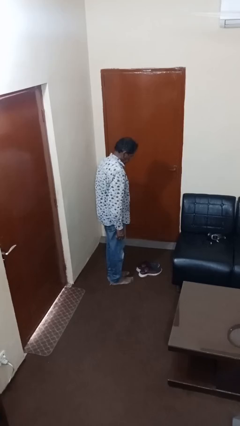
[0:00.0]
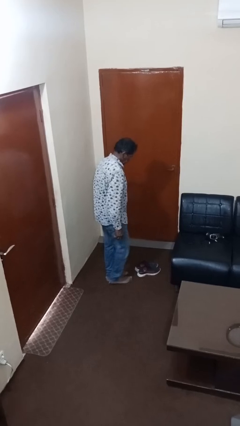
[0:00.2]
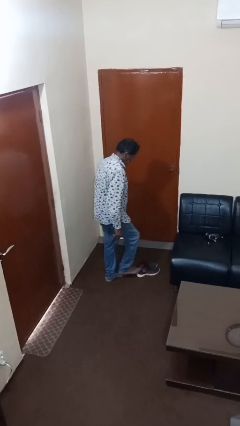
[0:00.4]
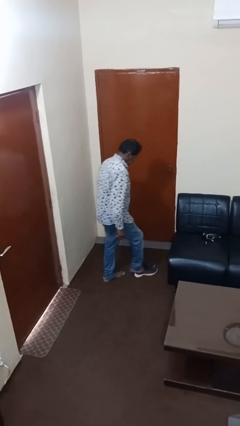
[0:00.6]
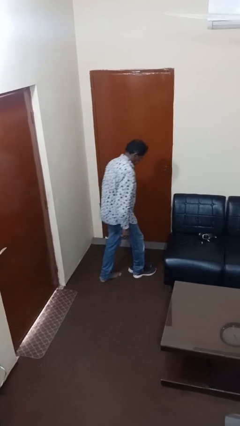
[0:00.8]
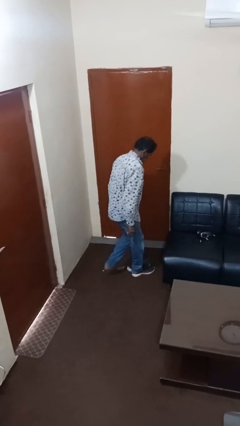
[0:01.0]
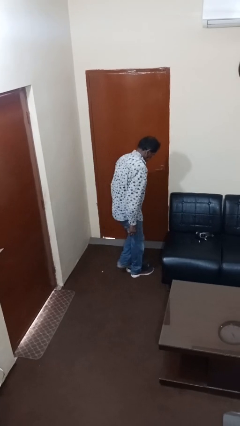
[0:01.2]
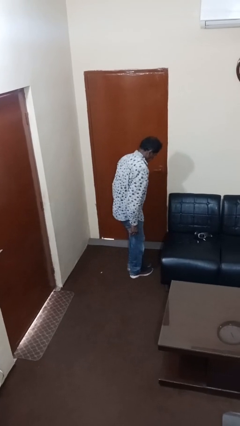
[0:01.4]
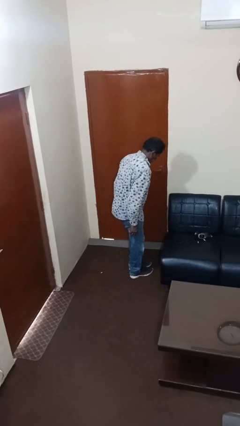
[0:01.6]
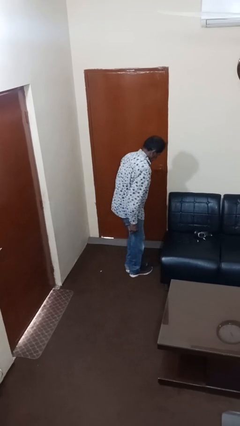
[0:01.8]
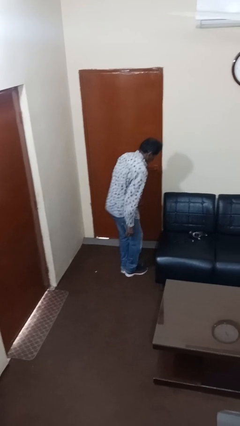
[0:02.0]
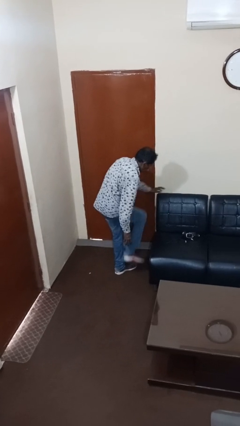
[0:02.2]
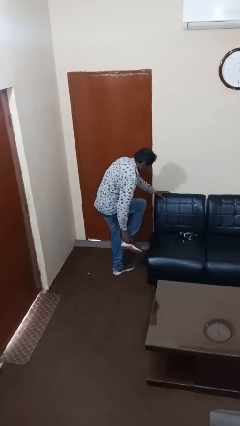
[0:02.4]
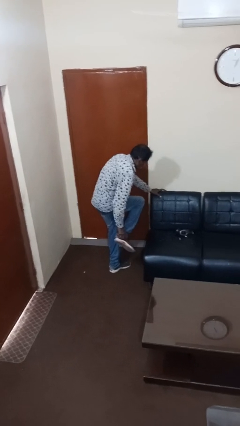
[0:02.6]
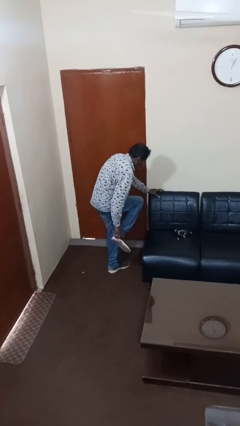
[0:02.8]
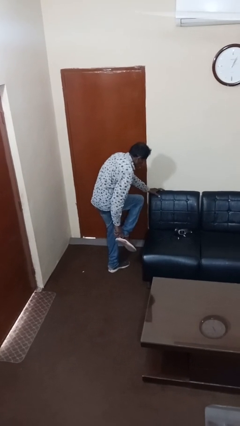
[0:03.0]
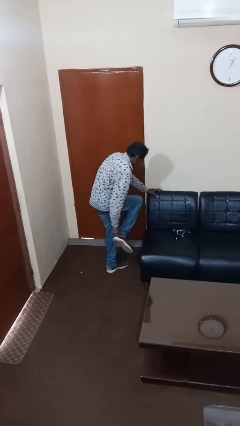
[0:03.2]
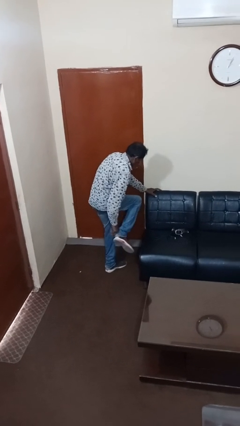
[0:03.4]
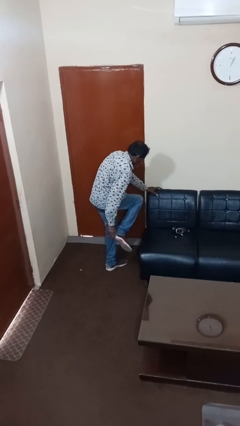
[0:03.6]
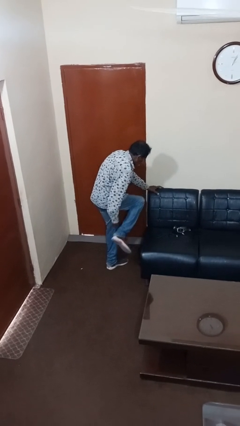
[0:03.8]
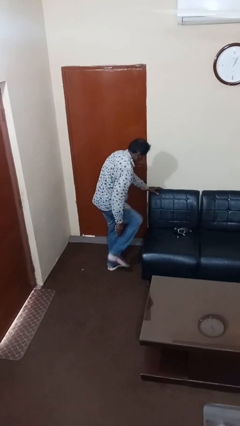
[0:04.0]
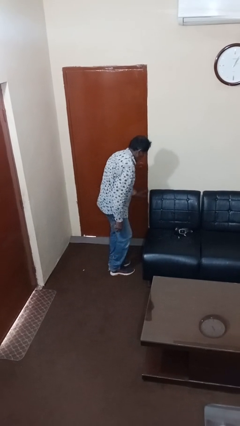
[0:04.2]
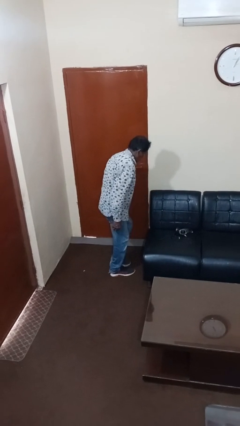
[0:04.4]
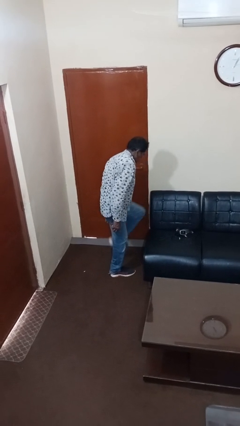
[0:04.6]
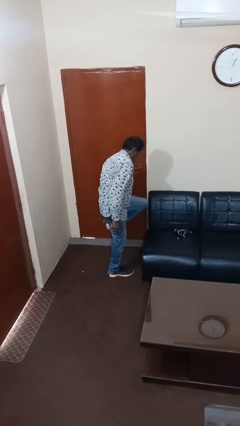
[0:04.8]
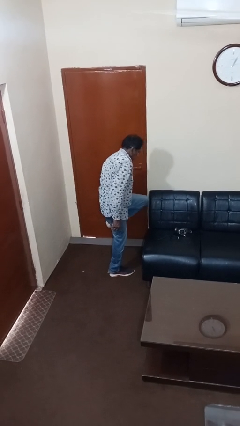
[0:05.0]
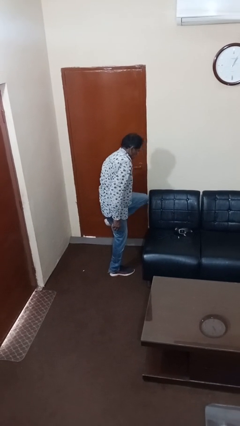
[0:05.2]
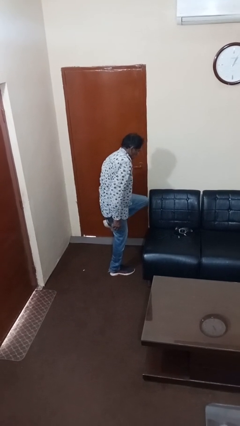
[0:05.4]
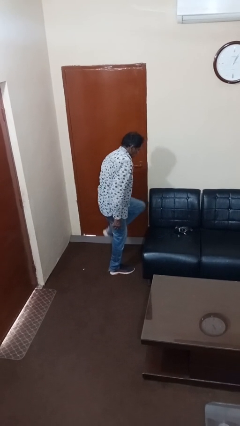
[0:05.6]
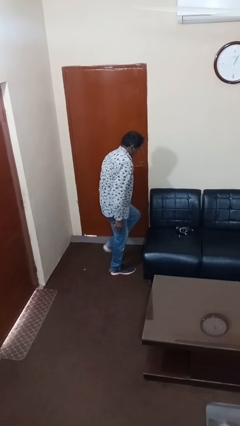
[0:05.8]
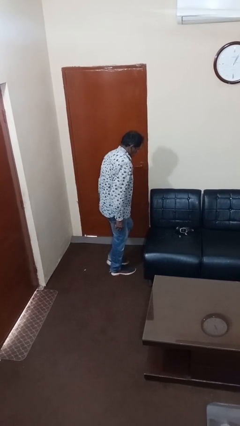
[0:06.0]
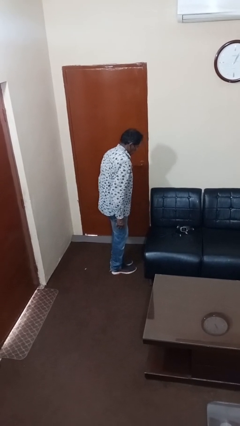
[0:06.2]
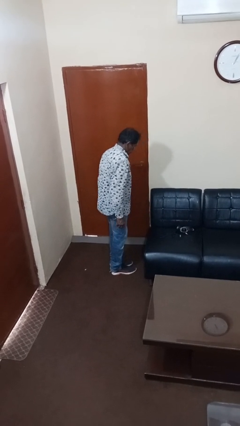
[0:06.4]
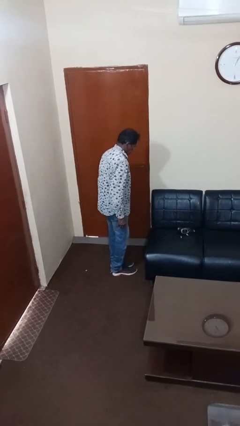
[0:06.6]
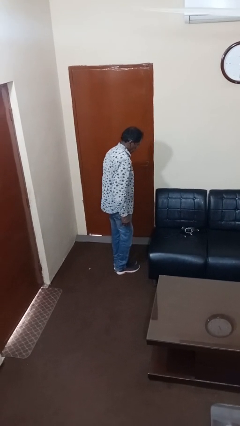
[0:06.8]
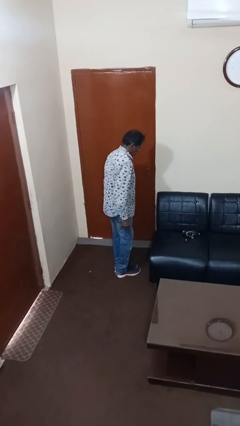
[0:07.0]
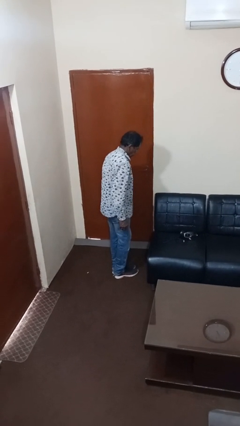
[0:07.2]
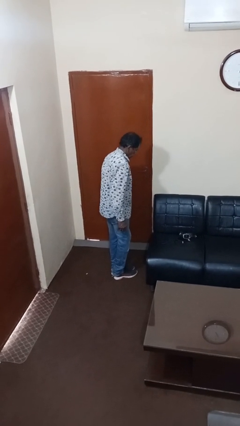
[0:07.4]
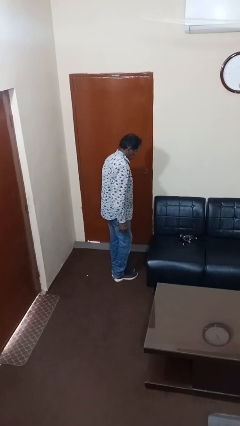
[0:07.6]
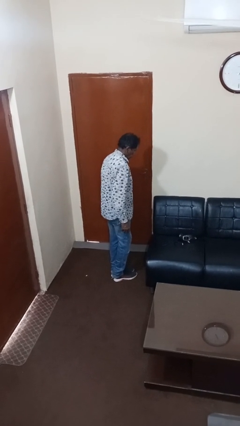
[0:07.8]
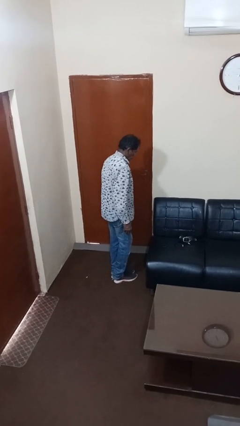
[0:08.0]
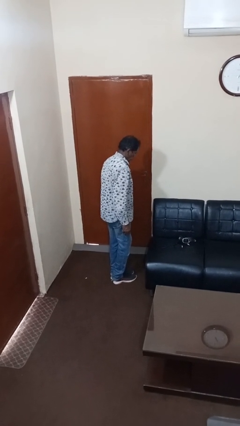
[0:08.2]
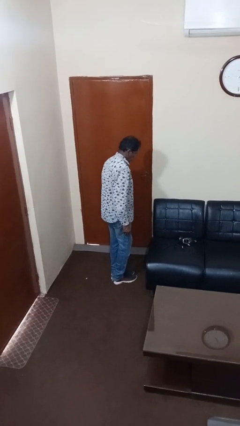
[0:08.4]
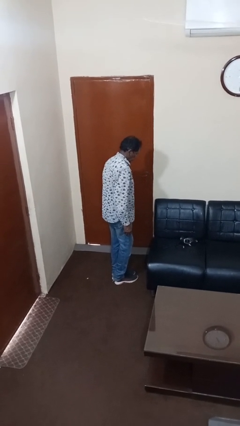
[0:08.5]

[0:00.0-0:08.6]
person puts on shoes

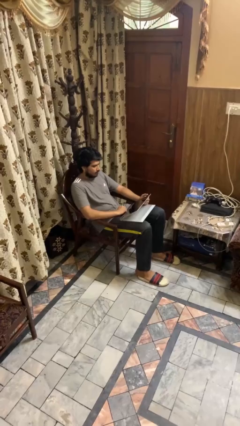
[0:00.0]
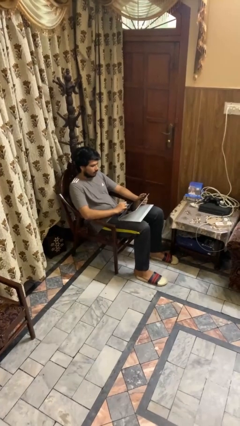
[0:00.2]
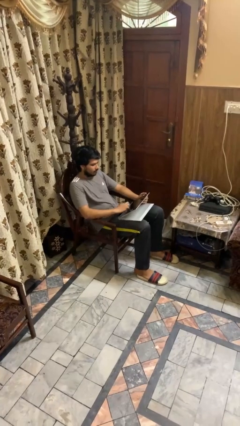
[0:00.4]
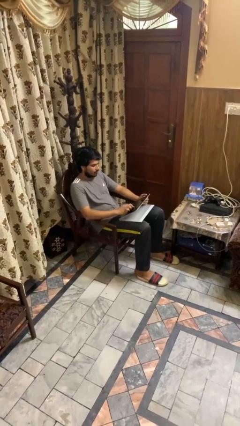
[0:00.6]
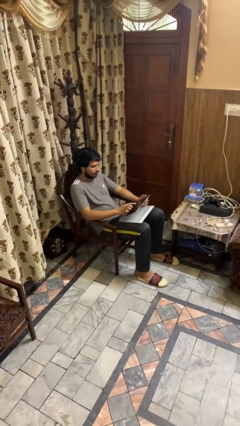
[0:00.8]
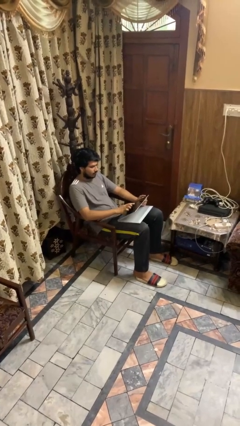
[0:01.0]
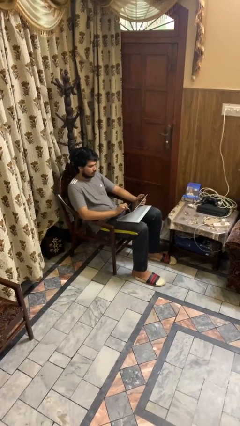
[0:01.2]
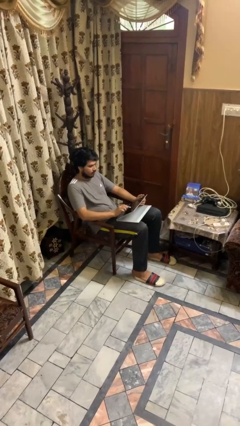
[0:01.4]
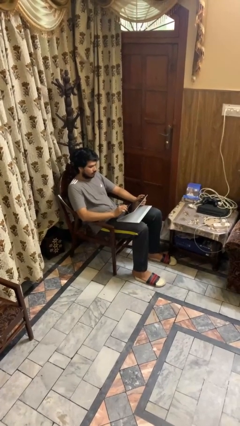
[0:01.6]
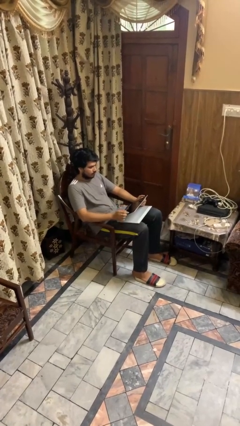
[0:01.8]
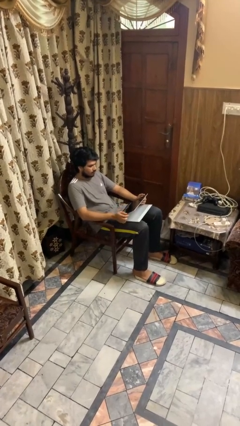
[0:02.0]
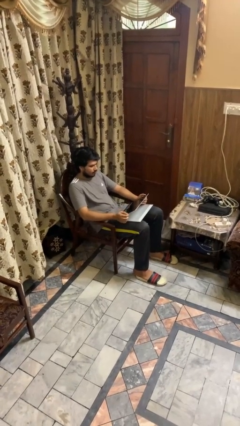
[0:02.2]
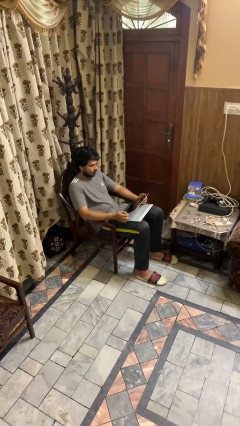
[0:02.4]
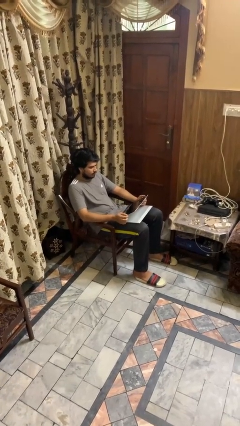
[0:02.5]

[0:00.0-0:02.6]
person interacts with tablet

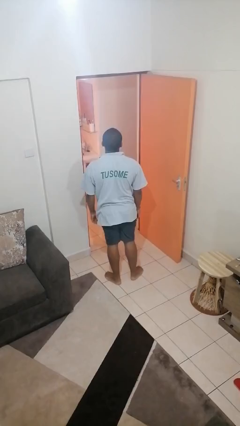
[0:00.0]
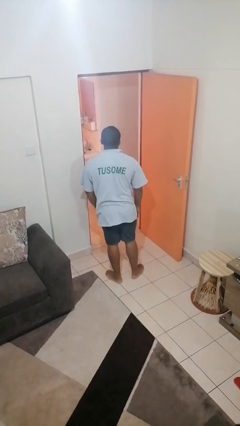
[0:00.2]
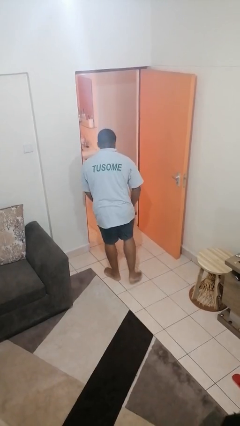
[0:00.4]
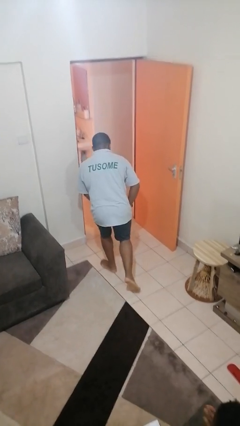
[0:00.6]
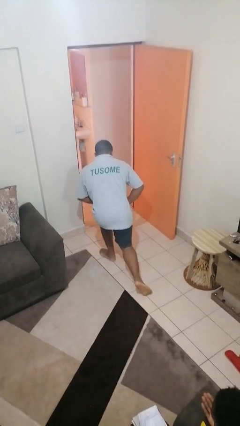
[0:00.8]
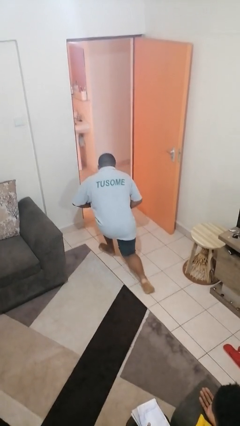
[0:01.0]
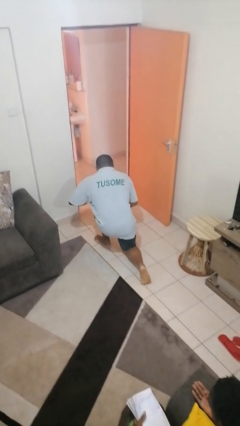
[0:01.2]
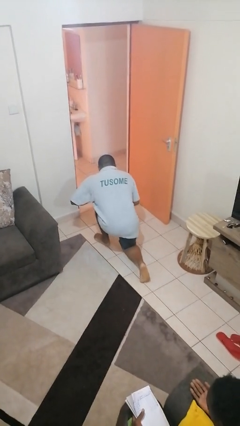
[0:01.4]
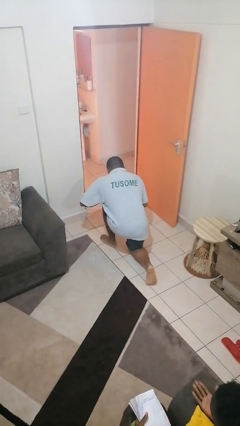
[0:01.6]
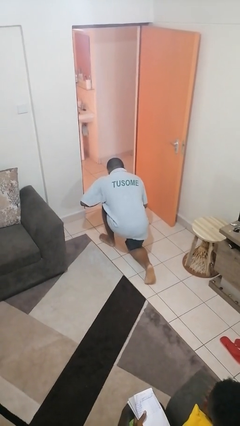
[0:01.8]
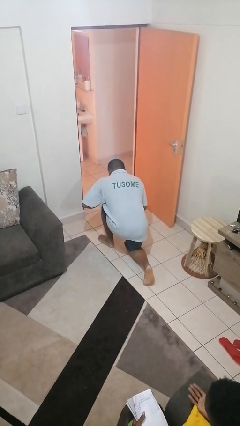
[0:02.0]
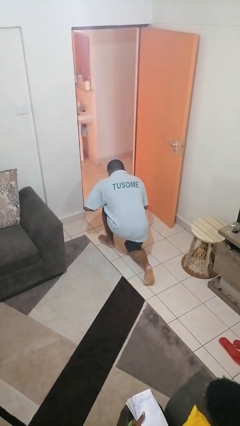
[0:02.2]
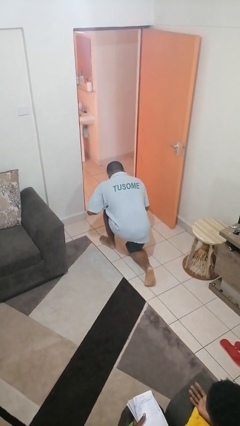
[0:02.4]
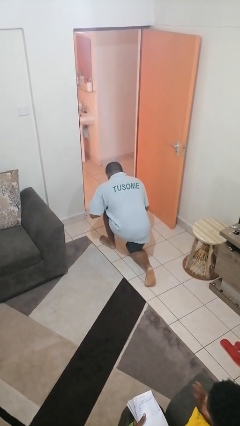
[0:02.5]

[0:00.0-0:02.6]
person kneels

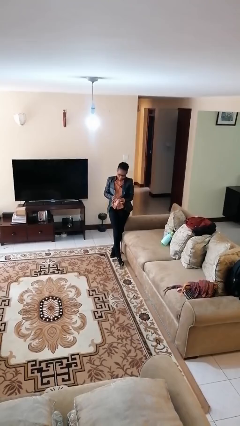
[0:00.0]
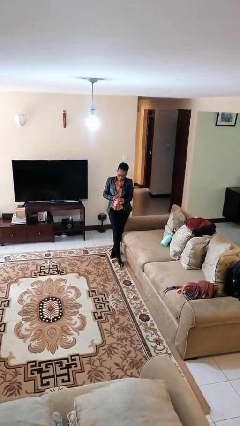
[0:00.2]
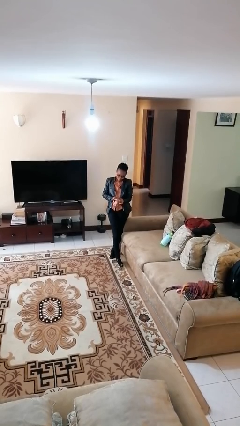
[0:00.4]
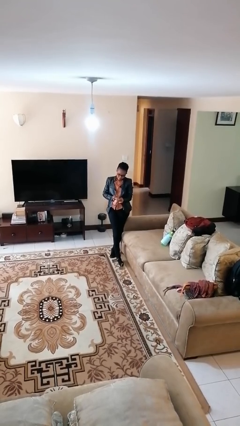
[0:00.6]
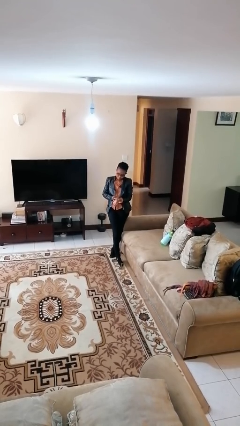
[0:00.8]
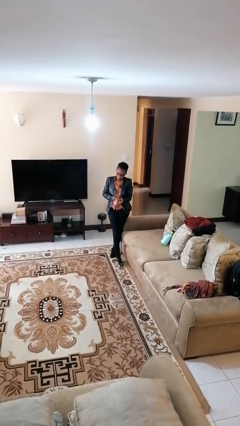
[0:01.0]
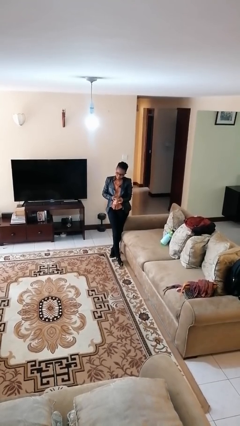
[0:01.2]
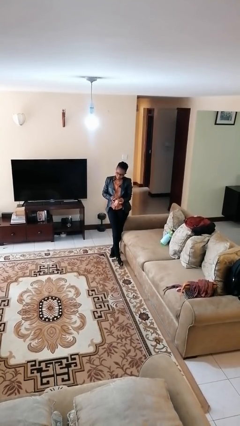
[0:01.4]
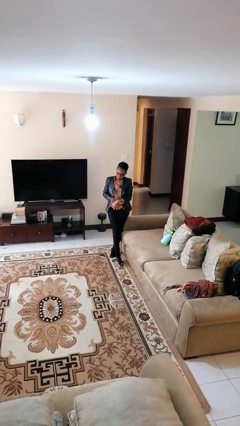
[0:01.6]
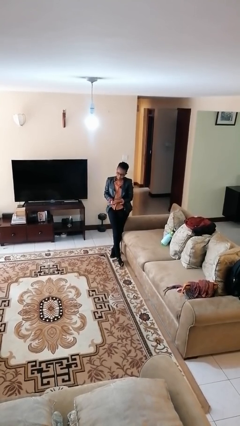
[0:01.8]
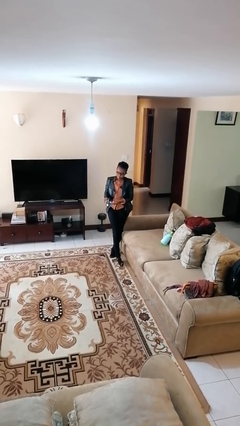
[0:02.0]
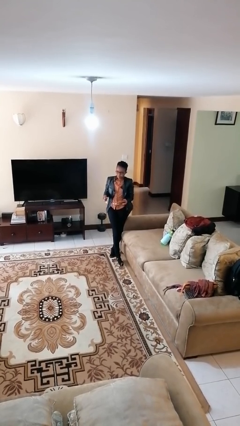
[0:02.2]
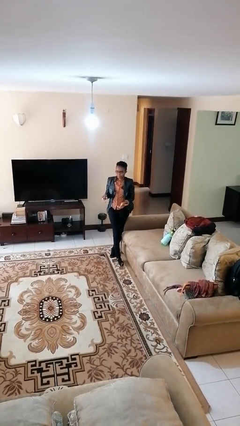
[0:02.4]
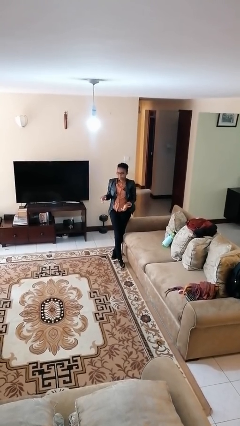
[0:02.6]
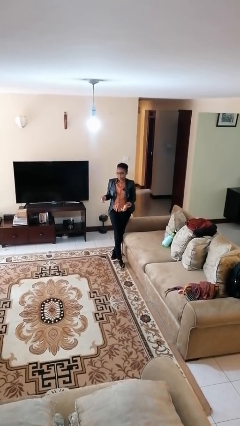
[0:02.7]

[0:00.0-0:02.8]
person takes off wristwatch

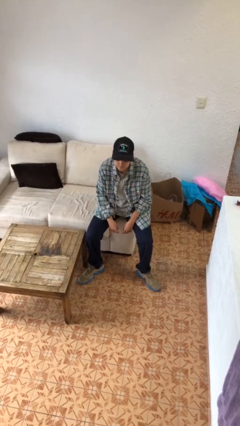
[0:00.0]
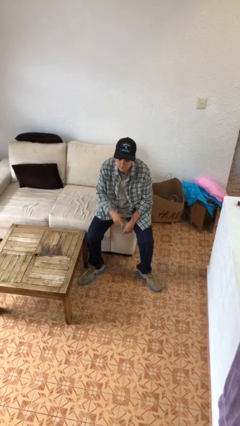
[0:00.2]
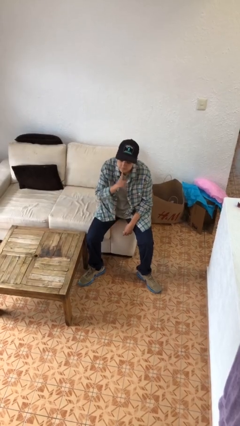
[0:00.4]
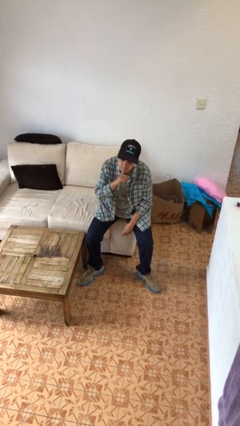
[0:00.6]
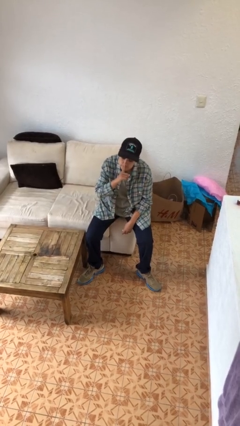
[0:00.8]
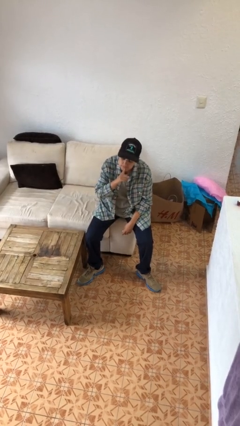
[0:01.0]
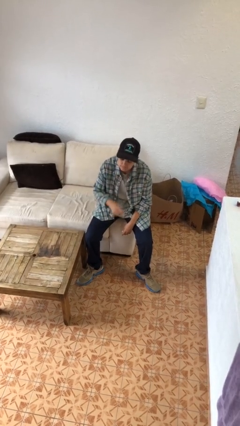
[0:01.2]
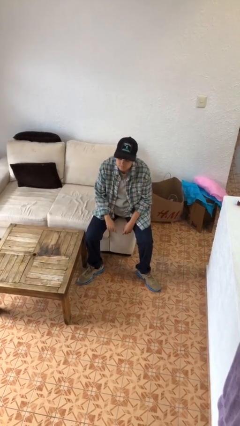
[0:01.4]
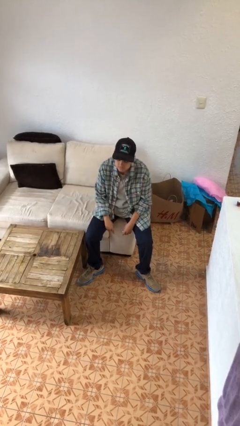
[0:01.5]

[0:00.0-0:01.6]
person gestures be quiet
